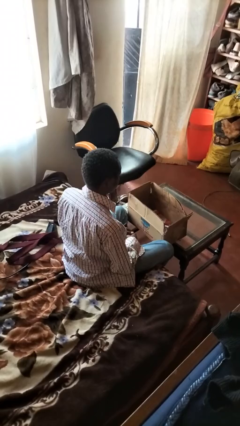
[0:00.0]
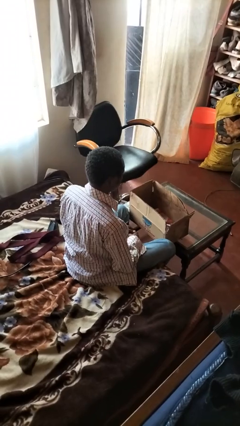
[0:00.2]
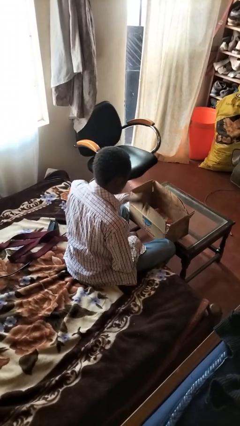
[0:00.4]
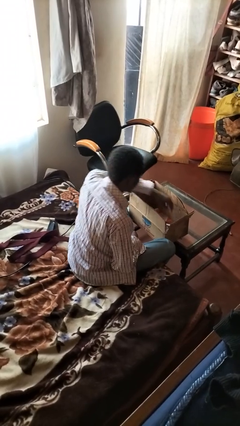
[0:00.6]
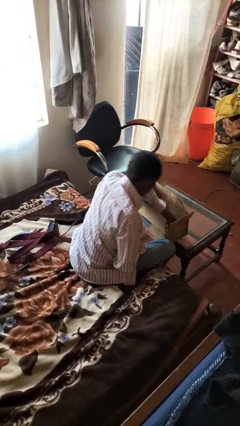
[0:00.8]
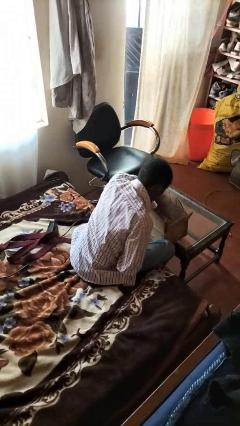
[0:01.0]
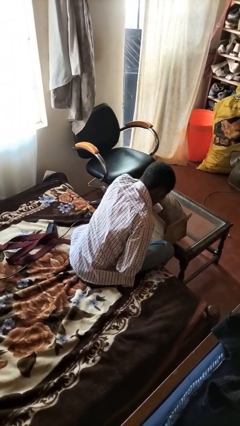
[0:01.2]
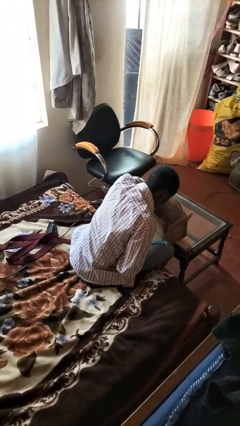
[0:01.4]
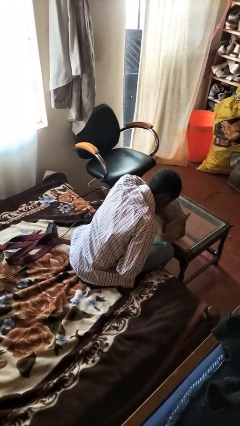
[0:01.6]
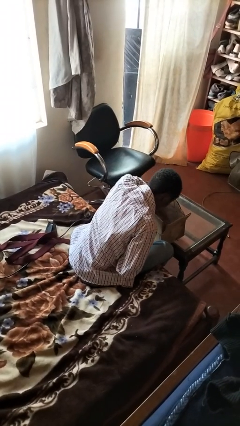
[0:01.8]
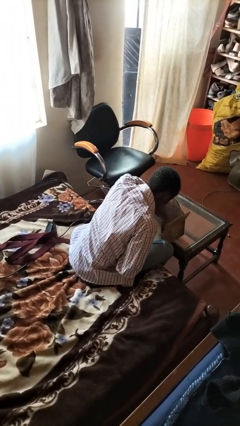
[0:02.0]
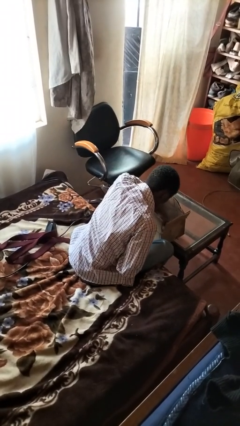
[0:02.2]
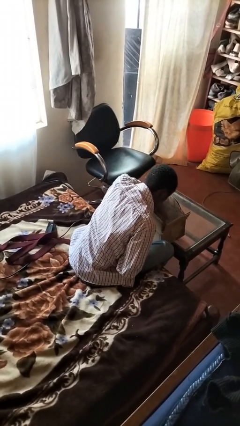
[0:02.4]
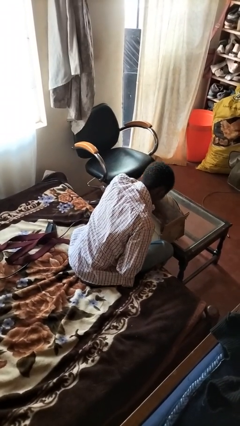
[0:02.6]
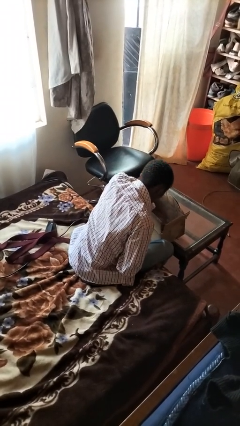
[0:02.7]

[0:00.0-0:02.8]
person searches in box

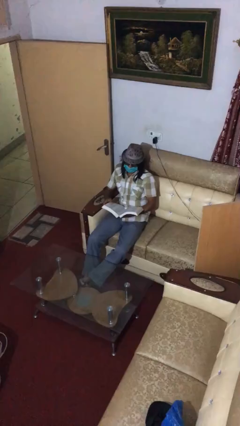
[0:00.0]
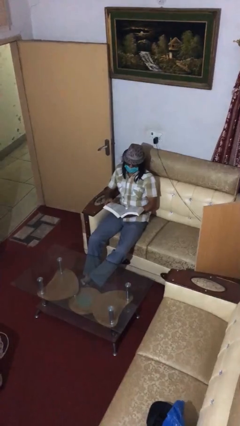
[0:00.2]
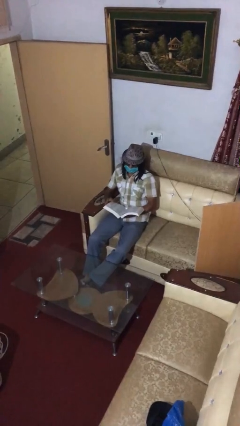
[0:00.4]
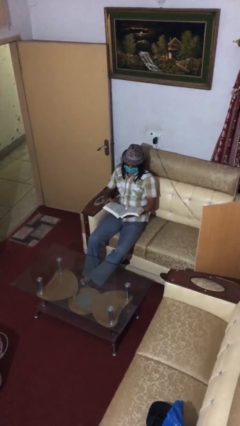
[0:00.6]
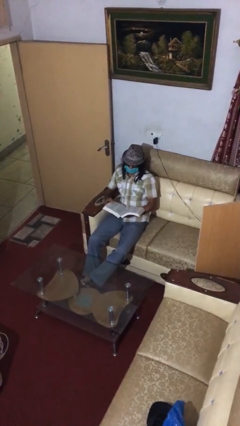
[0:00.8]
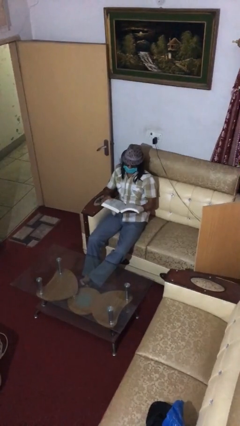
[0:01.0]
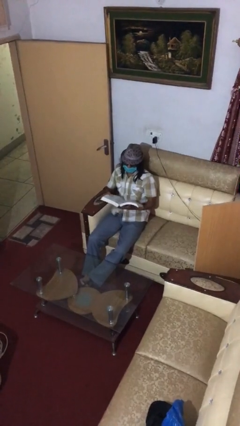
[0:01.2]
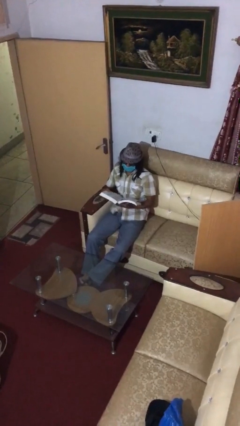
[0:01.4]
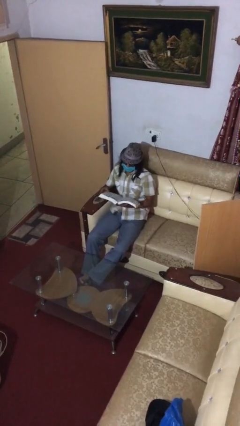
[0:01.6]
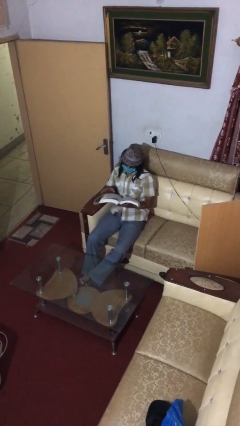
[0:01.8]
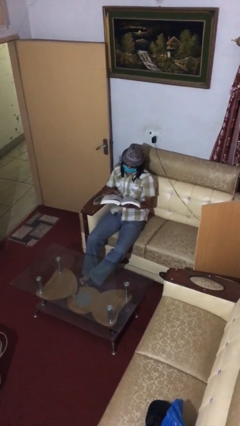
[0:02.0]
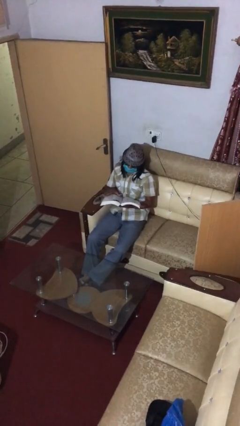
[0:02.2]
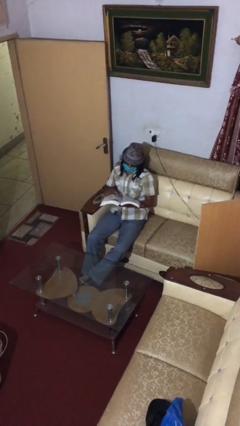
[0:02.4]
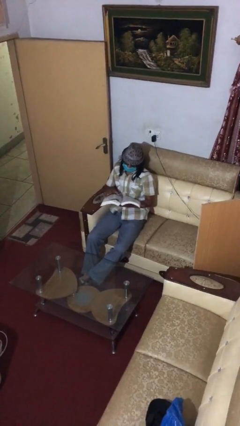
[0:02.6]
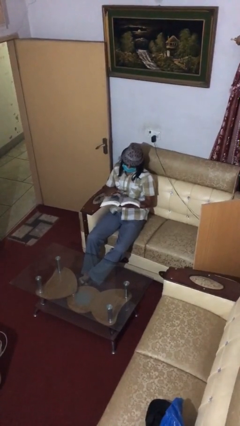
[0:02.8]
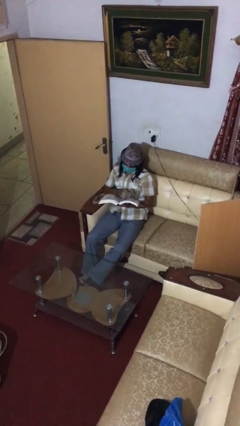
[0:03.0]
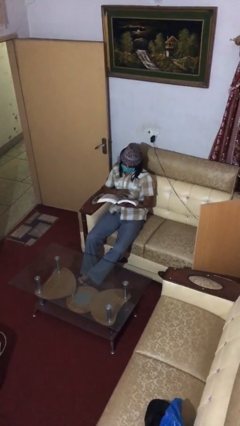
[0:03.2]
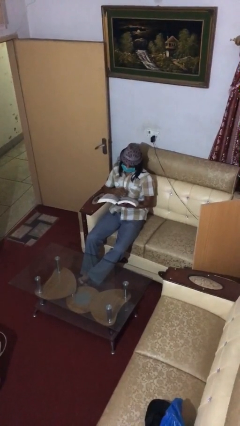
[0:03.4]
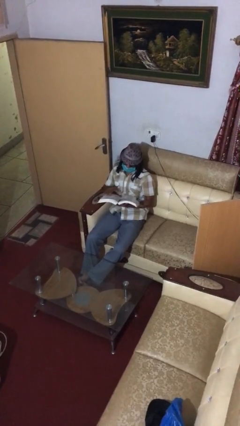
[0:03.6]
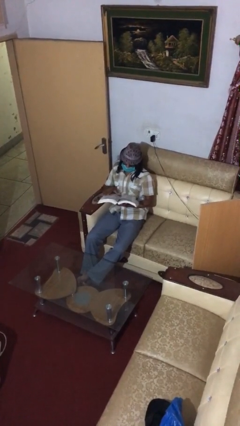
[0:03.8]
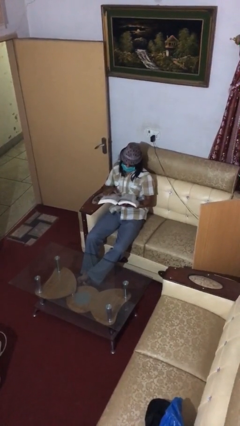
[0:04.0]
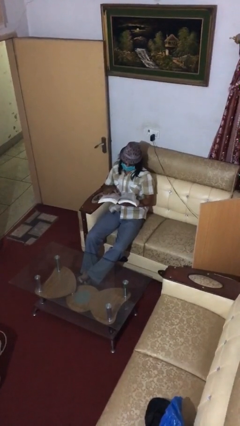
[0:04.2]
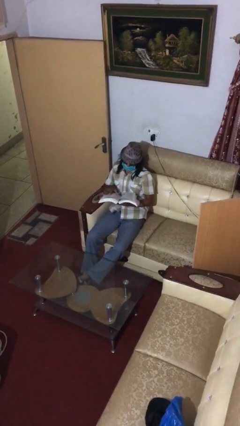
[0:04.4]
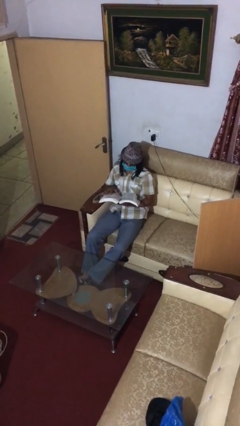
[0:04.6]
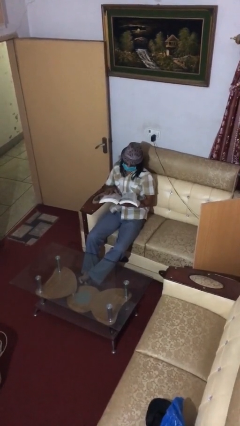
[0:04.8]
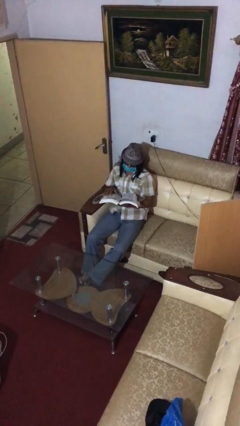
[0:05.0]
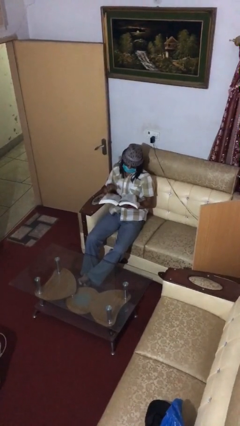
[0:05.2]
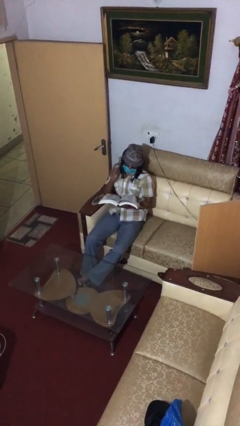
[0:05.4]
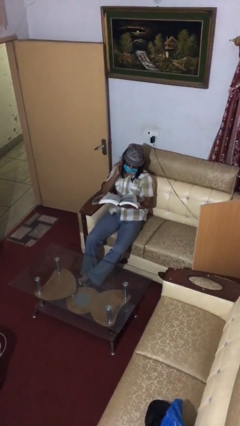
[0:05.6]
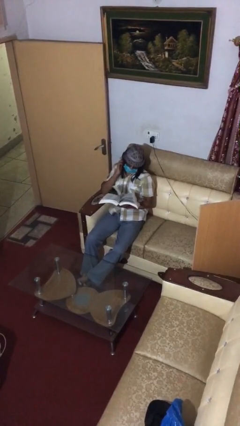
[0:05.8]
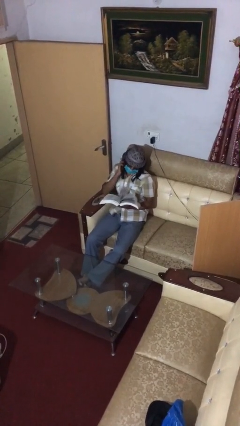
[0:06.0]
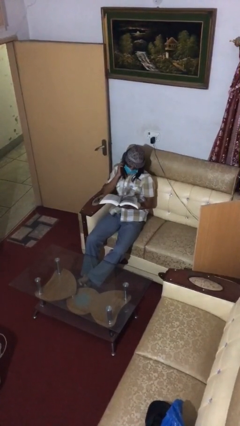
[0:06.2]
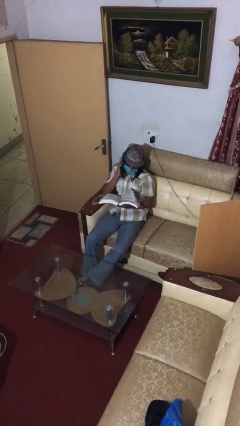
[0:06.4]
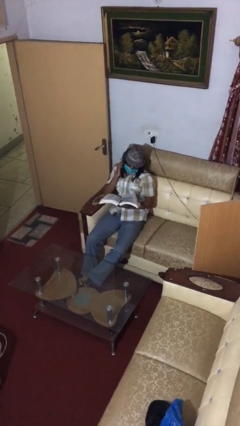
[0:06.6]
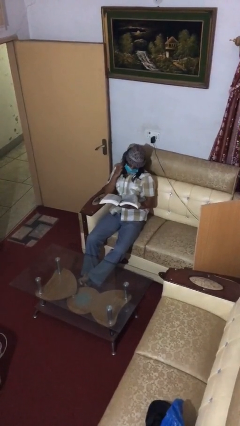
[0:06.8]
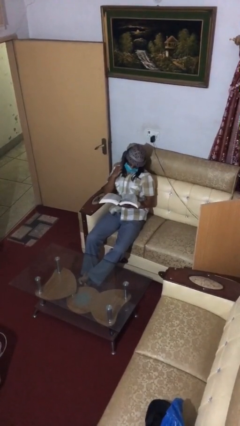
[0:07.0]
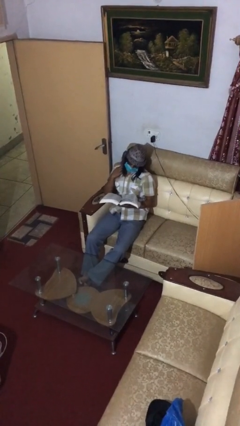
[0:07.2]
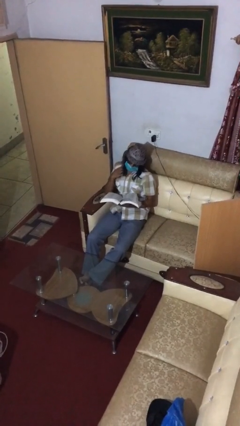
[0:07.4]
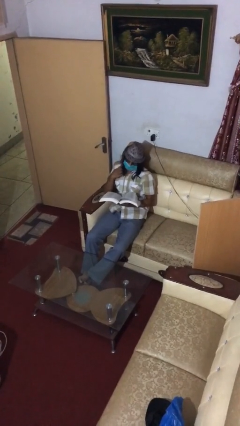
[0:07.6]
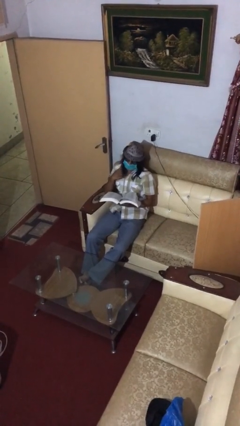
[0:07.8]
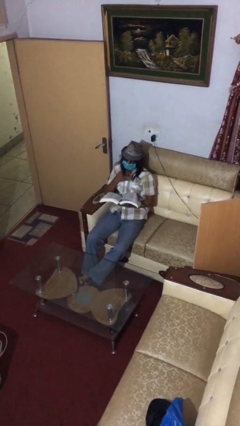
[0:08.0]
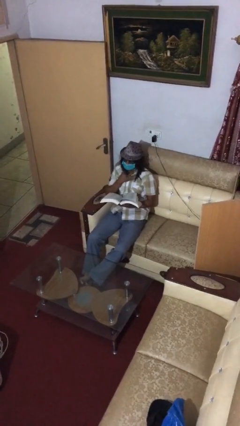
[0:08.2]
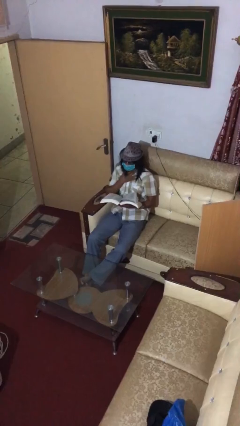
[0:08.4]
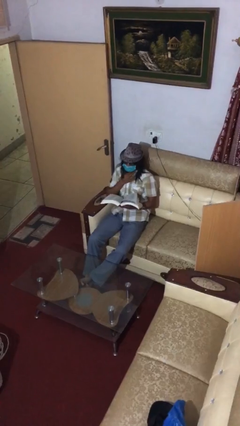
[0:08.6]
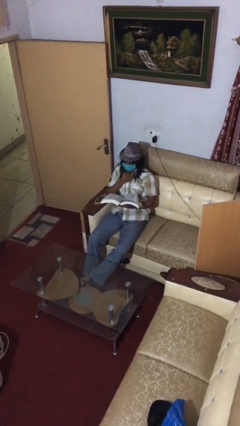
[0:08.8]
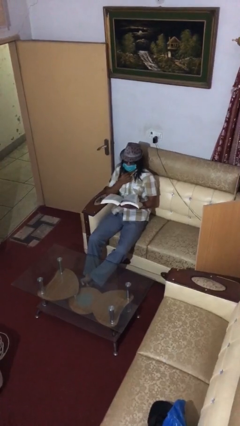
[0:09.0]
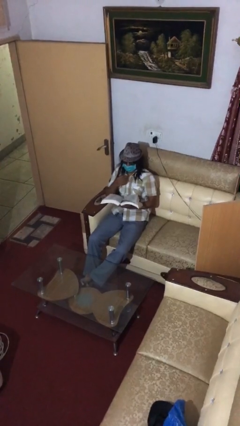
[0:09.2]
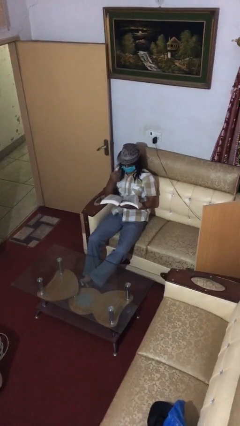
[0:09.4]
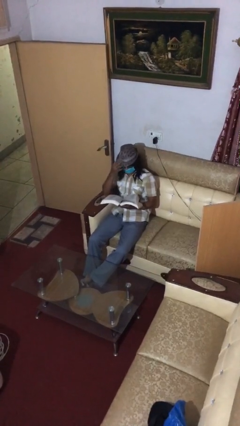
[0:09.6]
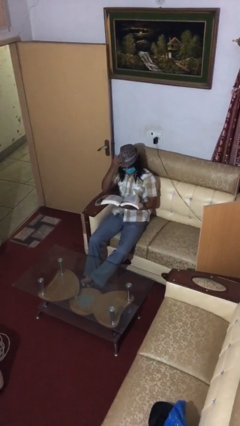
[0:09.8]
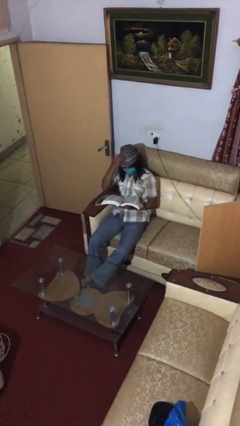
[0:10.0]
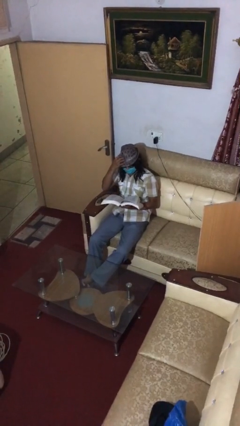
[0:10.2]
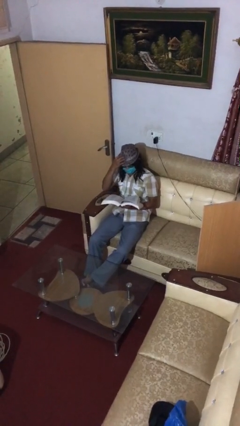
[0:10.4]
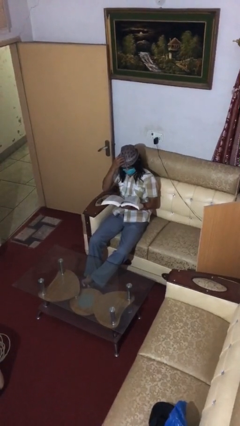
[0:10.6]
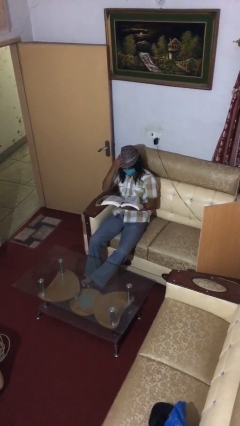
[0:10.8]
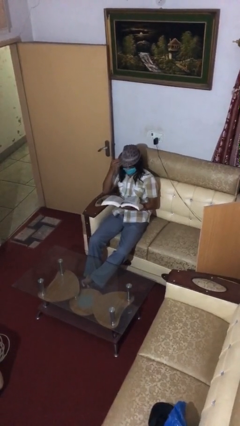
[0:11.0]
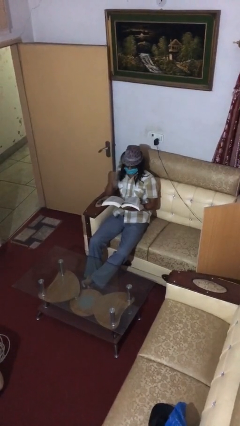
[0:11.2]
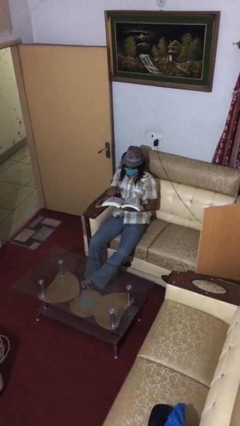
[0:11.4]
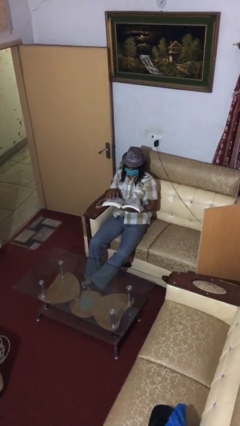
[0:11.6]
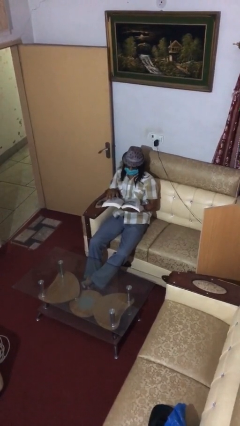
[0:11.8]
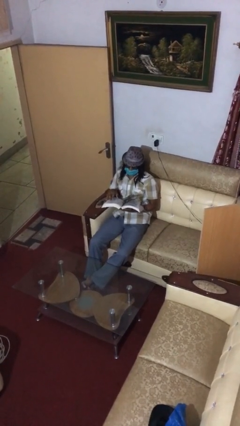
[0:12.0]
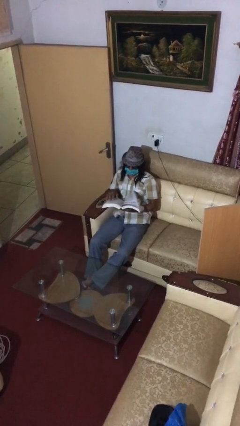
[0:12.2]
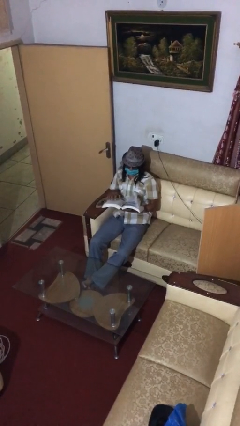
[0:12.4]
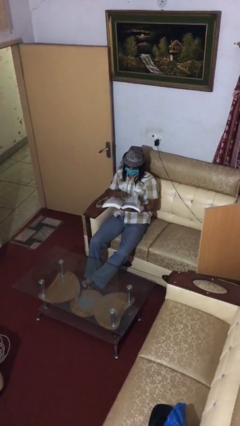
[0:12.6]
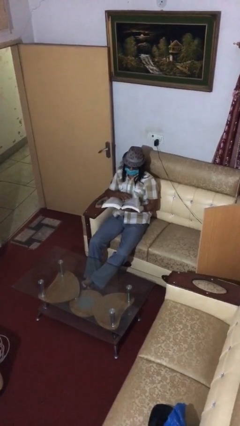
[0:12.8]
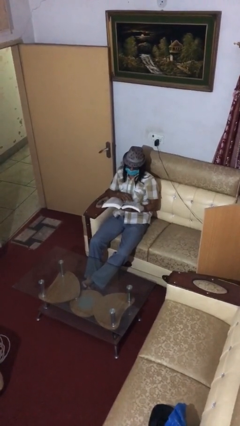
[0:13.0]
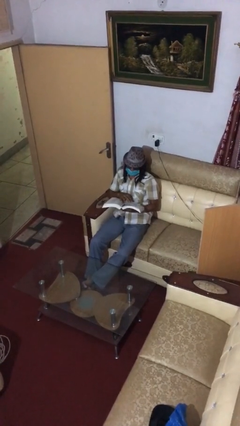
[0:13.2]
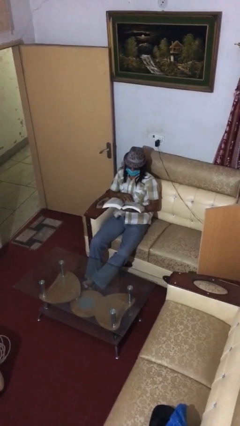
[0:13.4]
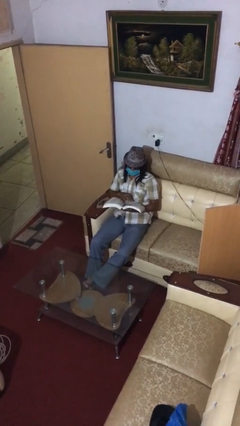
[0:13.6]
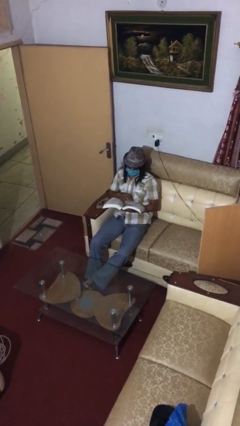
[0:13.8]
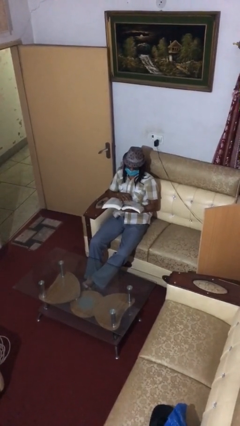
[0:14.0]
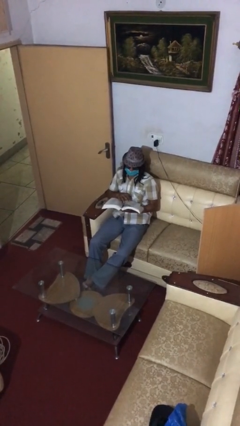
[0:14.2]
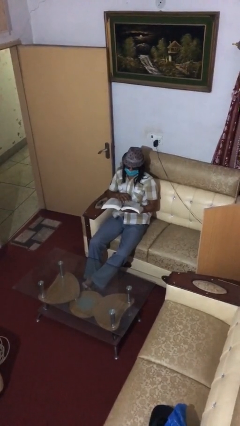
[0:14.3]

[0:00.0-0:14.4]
person reads document

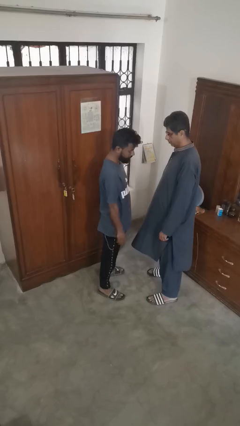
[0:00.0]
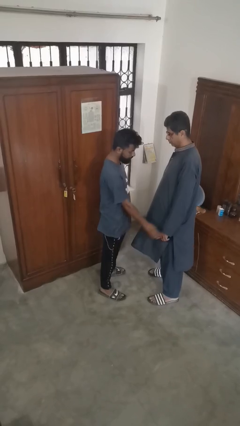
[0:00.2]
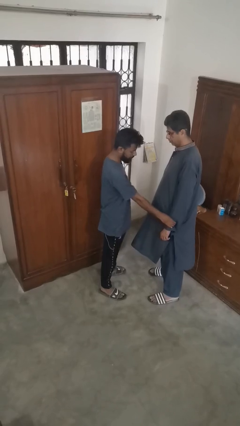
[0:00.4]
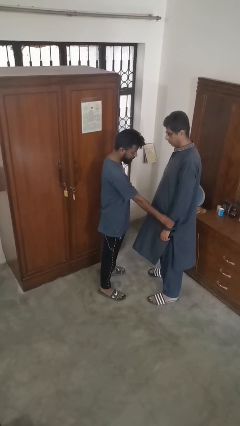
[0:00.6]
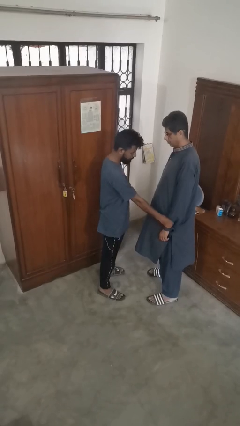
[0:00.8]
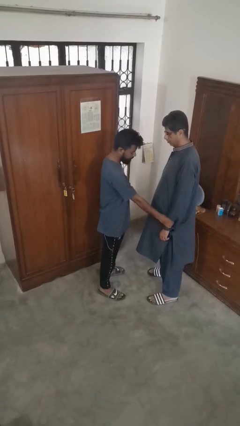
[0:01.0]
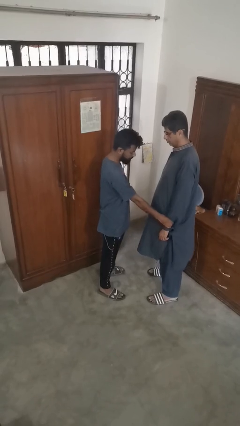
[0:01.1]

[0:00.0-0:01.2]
person grabs person by forearm
